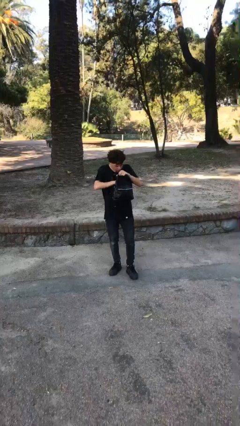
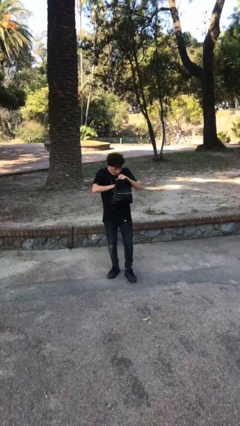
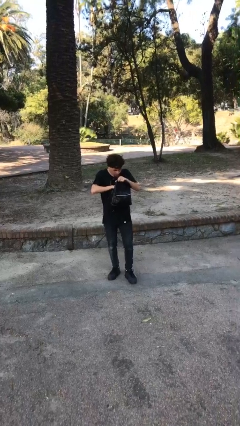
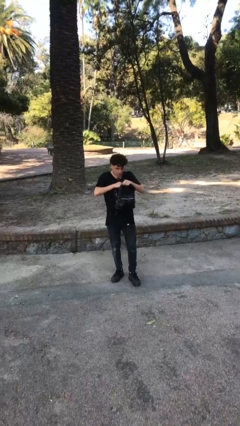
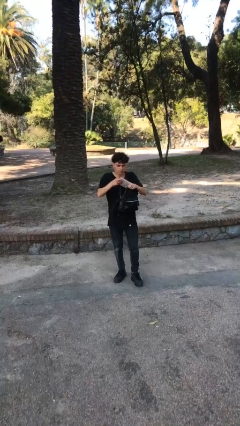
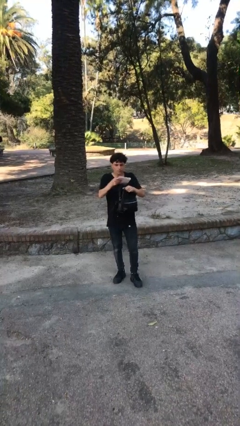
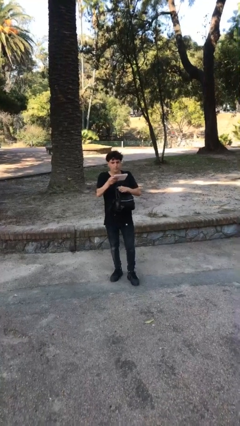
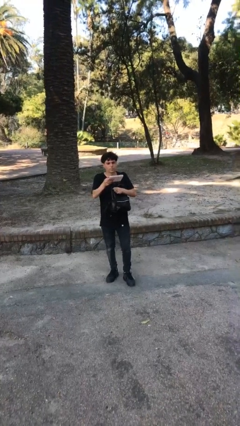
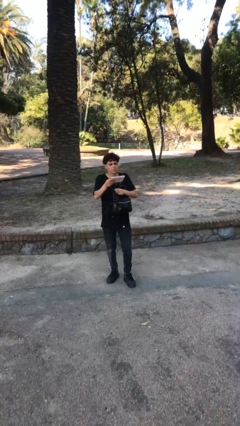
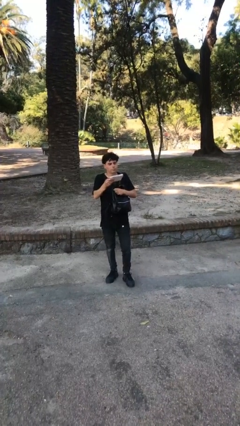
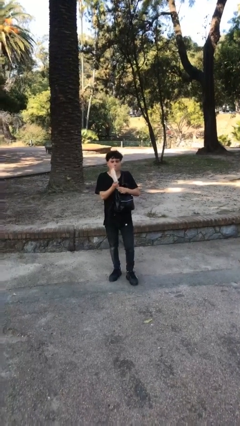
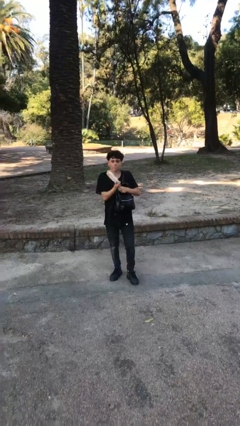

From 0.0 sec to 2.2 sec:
person takes object from purse

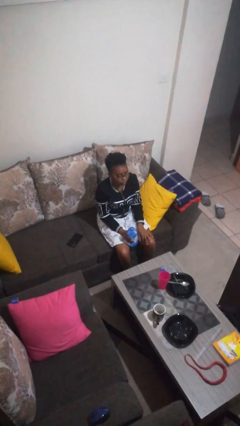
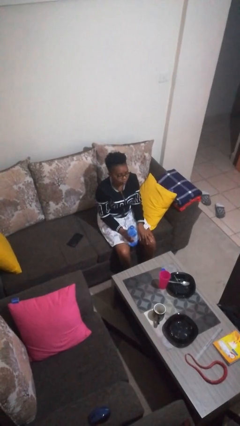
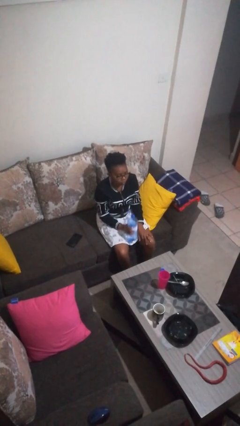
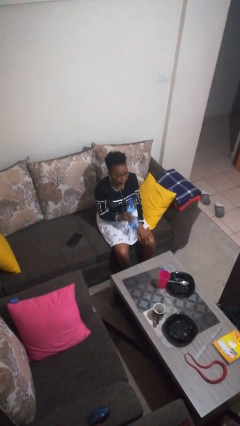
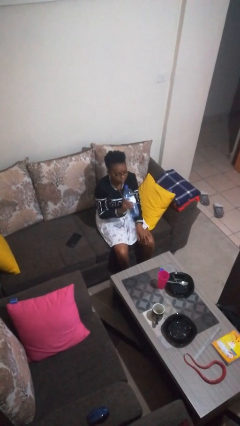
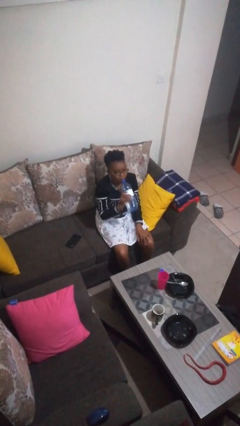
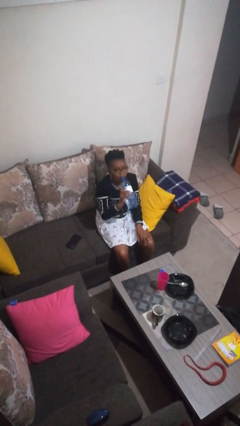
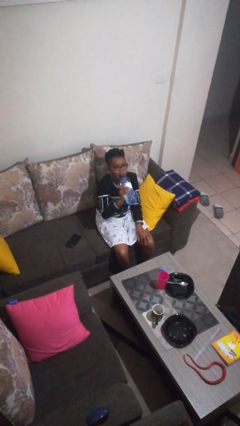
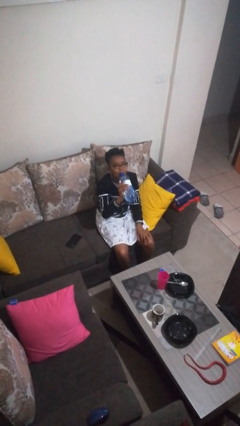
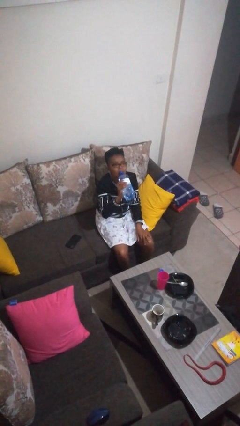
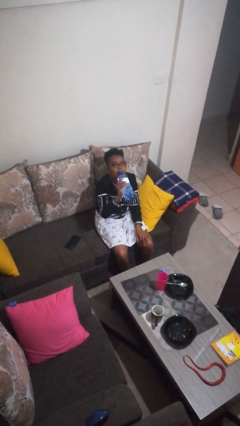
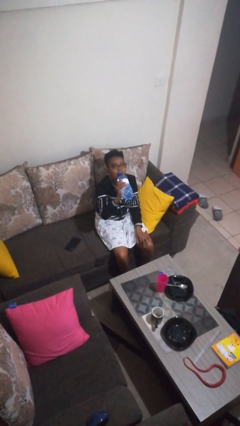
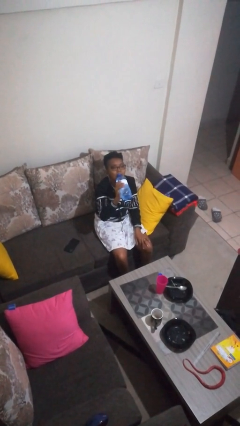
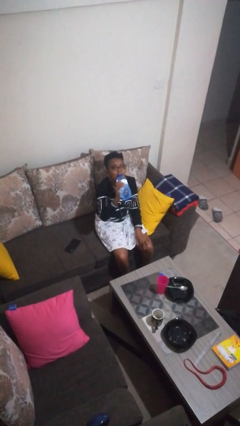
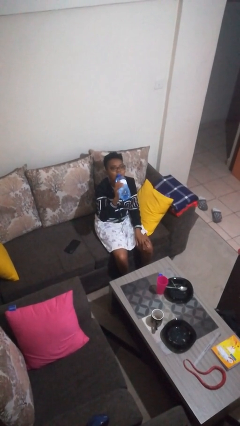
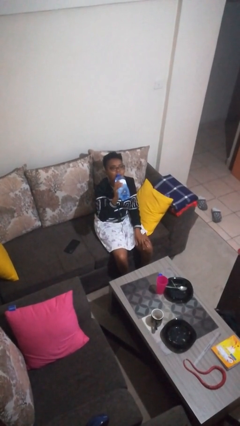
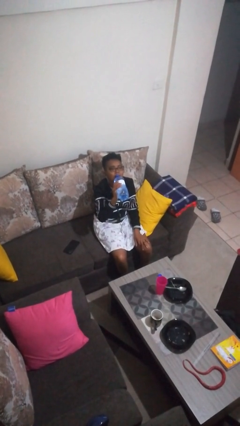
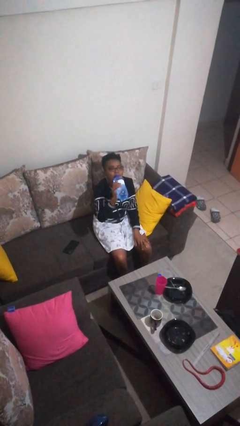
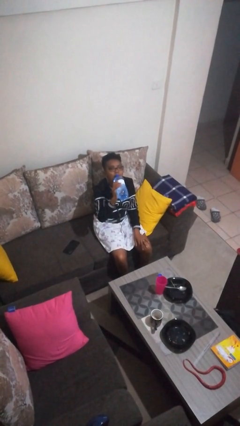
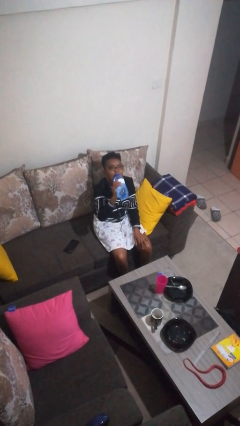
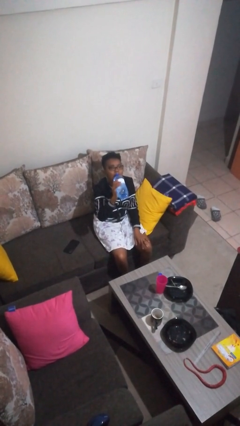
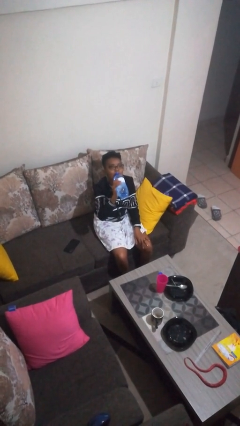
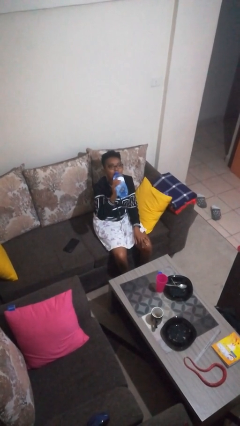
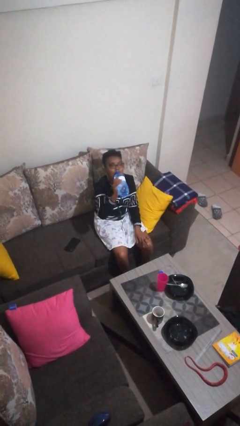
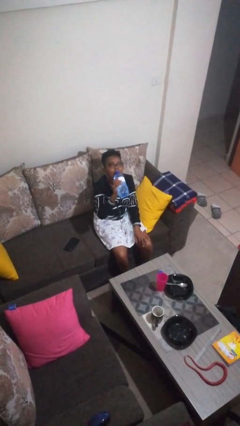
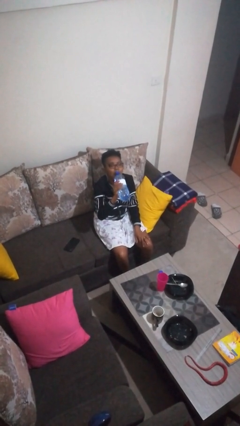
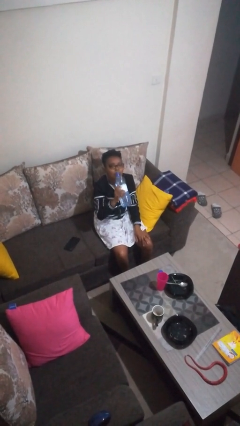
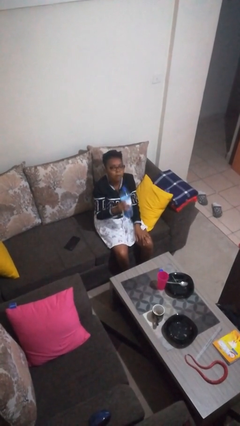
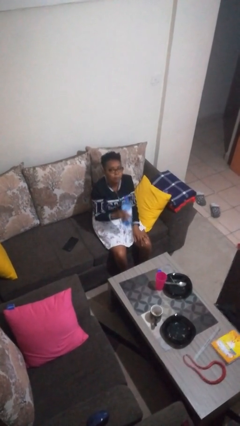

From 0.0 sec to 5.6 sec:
person drinks from bottle

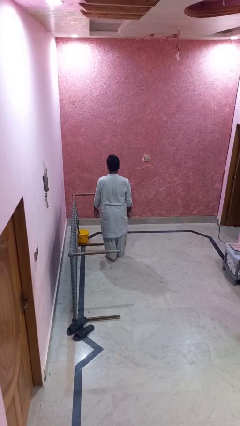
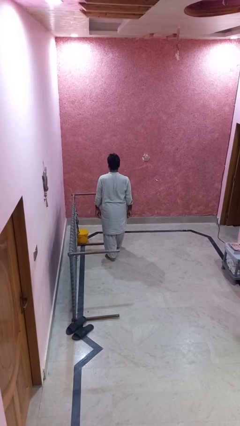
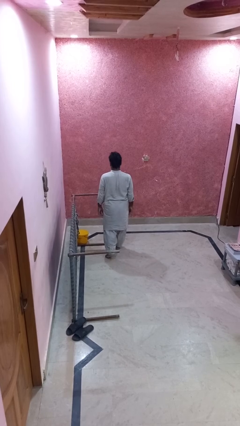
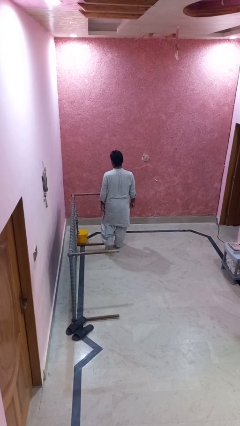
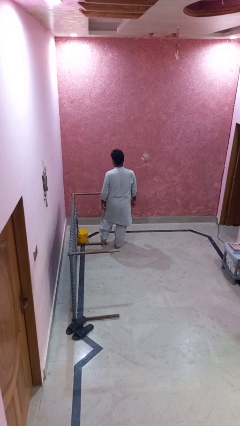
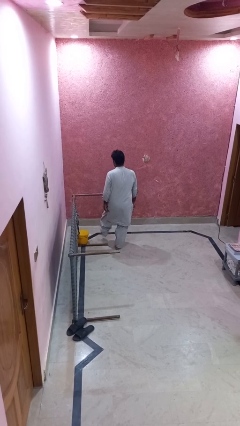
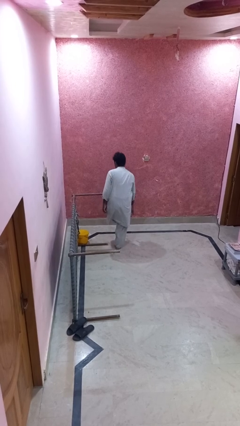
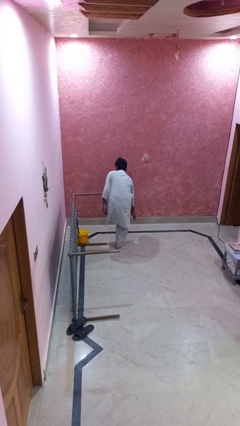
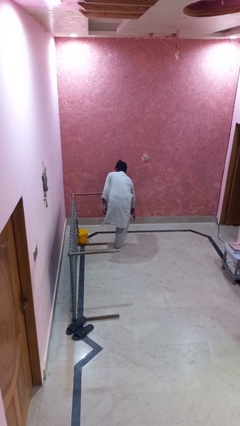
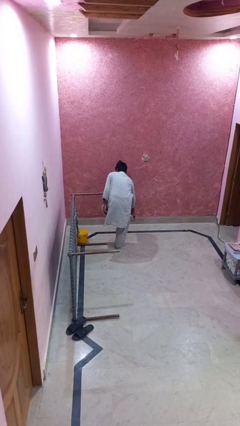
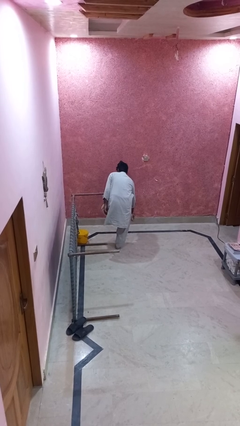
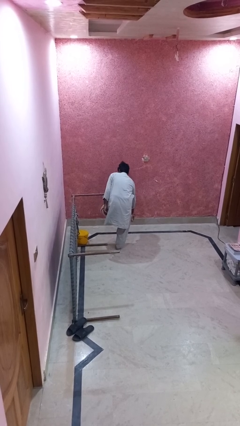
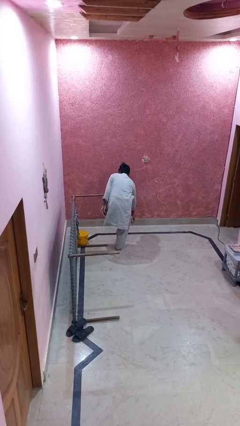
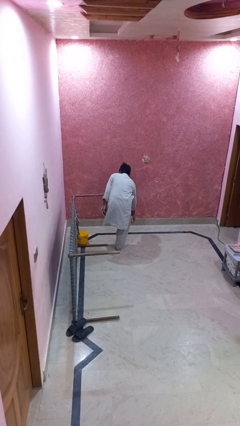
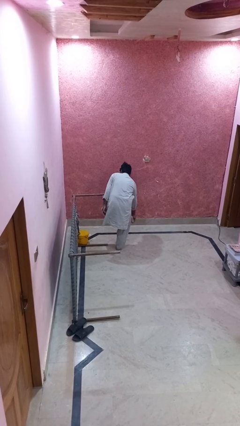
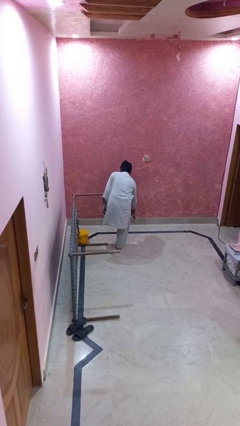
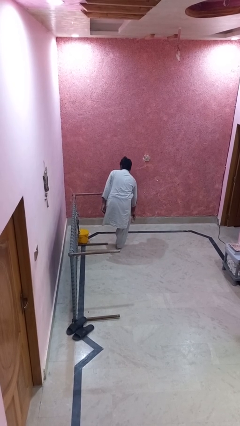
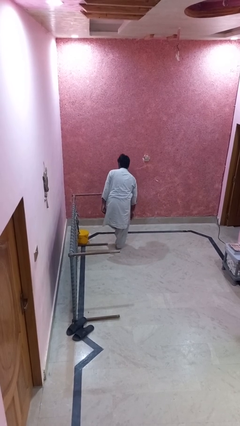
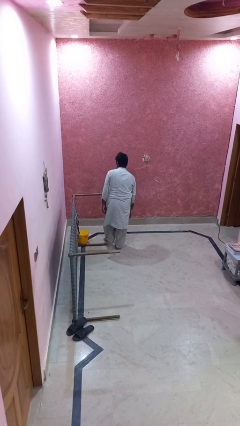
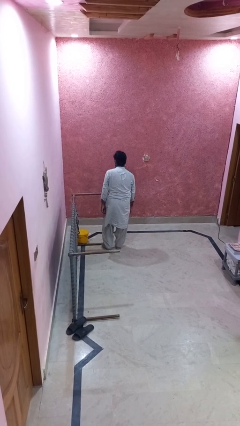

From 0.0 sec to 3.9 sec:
person stubs toe

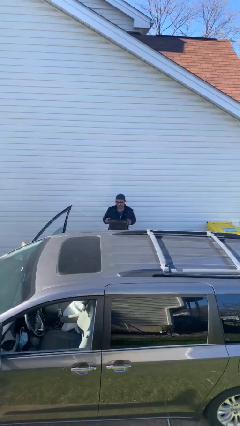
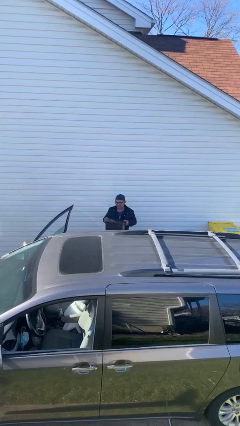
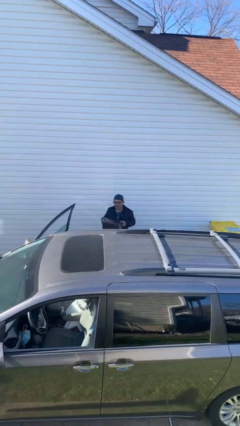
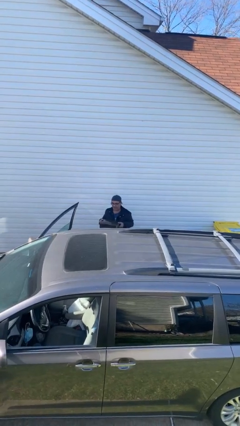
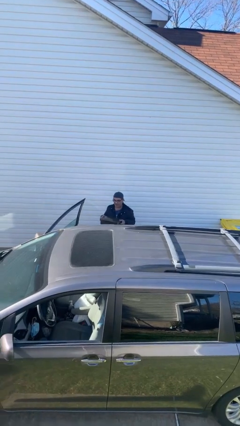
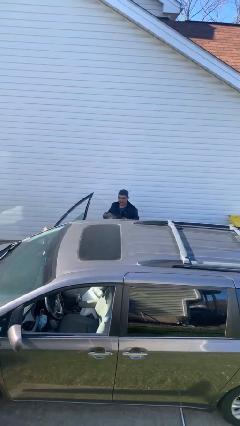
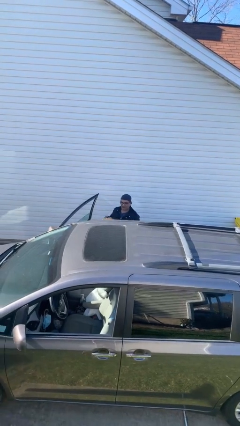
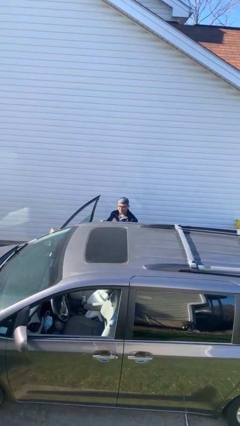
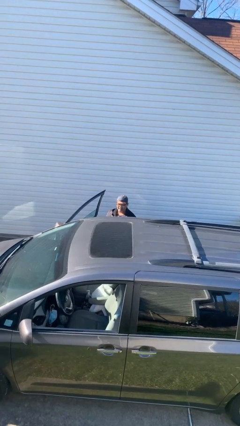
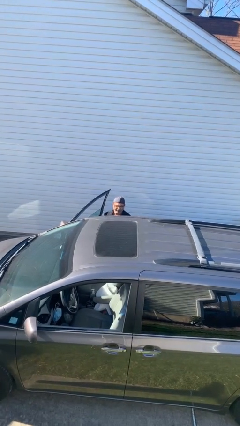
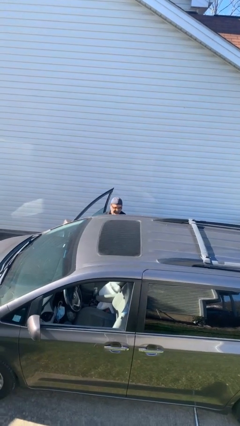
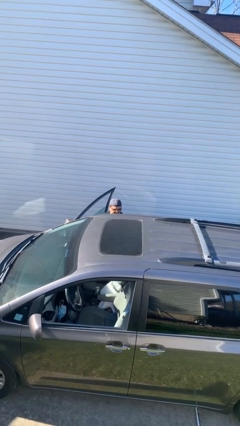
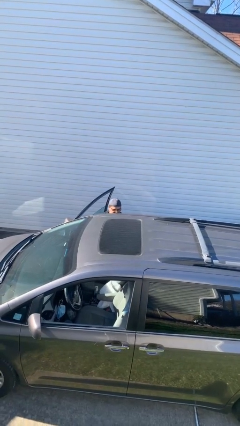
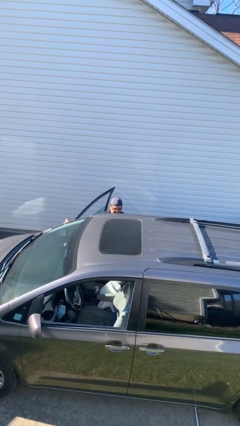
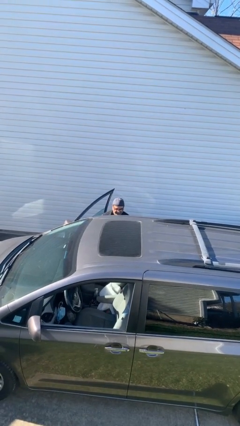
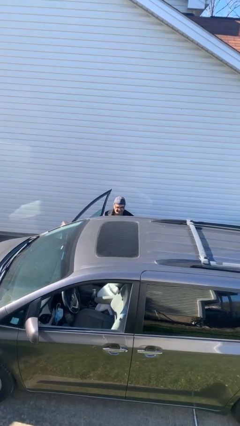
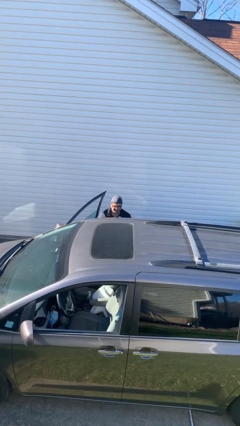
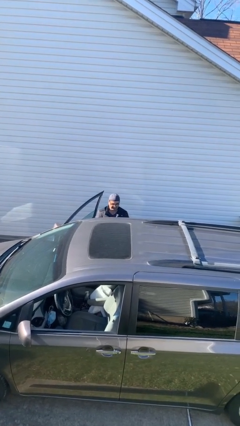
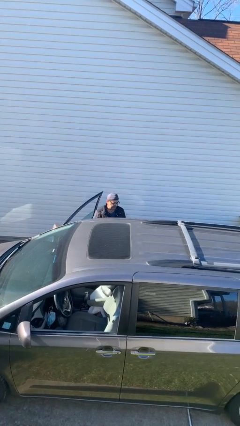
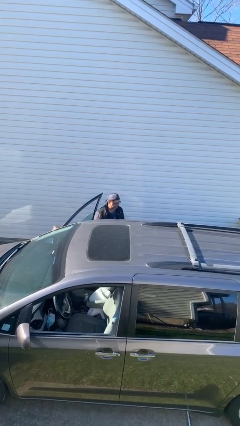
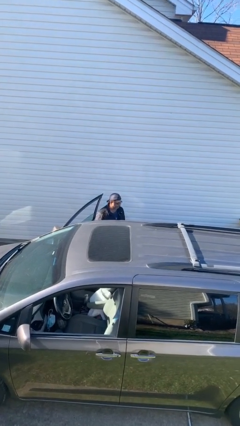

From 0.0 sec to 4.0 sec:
person loads car

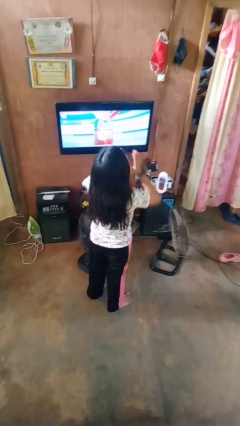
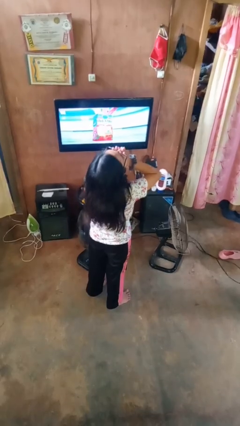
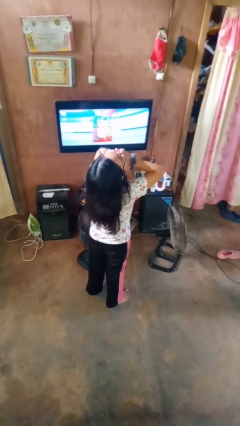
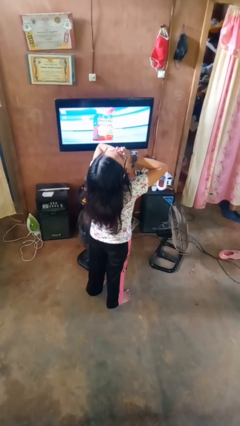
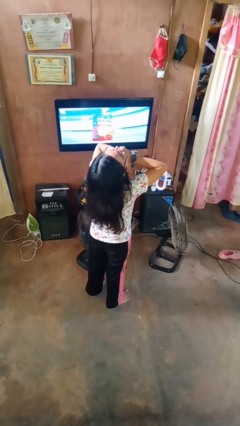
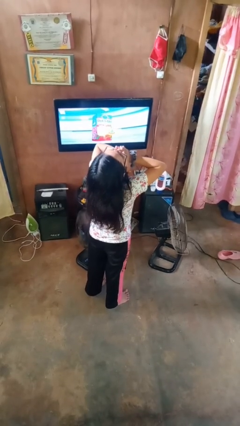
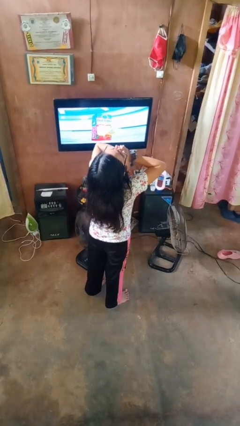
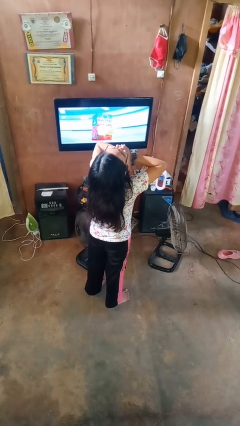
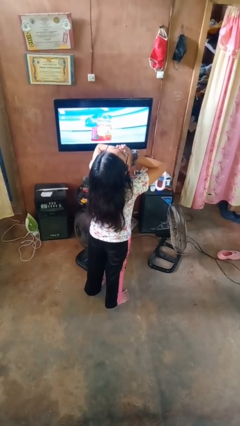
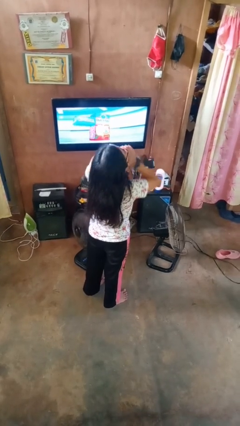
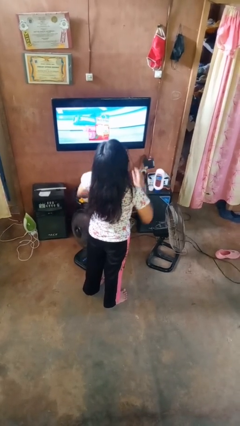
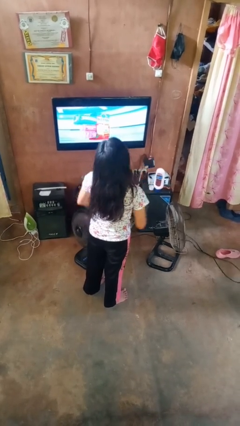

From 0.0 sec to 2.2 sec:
person yawns
